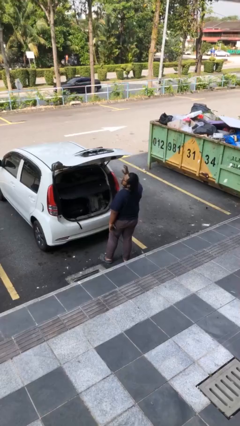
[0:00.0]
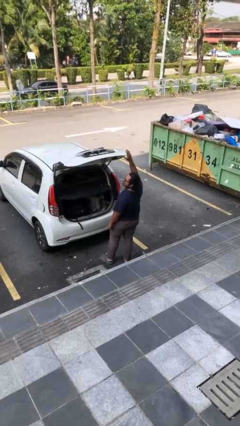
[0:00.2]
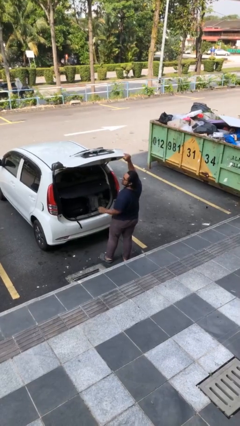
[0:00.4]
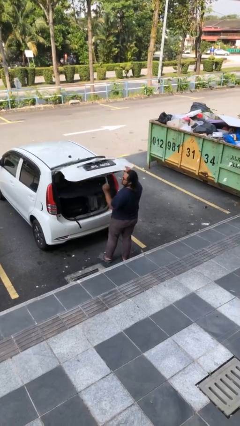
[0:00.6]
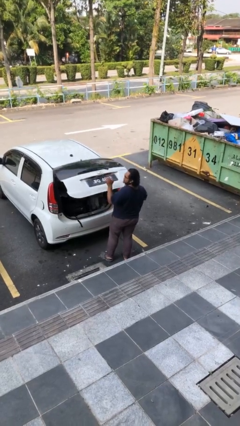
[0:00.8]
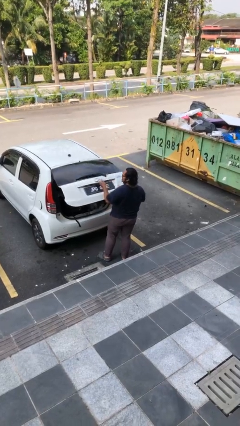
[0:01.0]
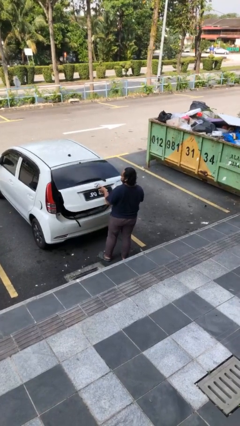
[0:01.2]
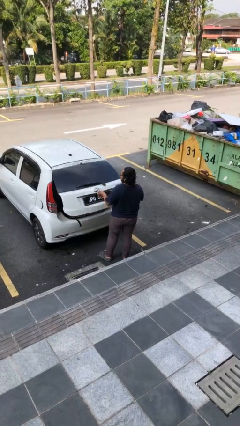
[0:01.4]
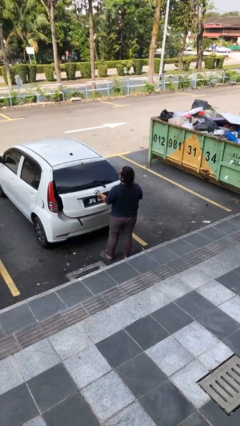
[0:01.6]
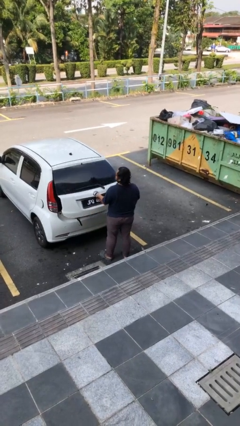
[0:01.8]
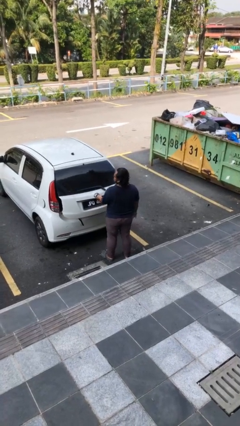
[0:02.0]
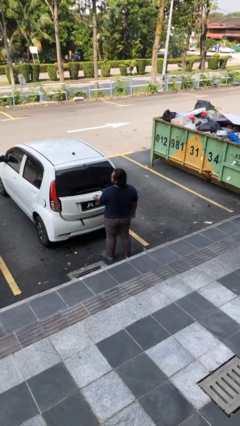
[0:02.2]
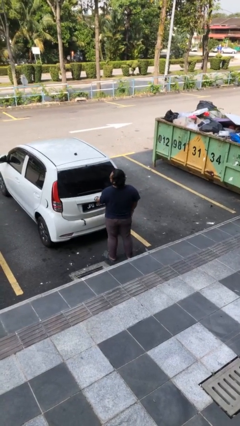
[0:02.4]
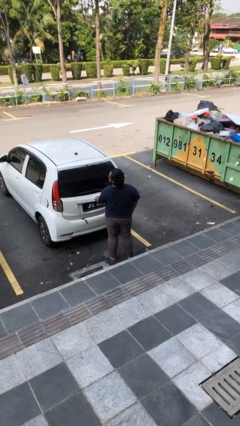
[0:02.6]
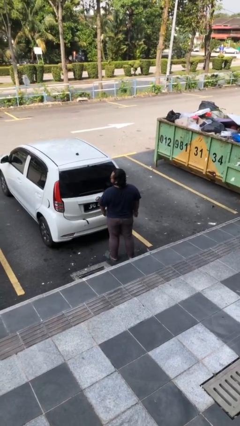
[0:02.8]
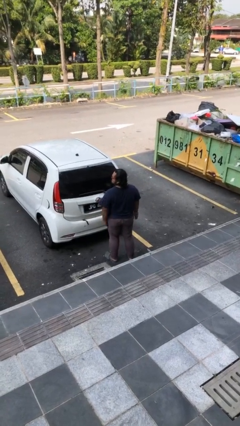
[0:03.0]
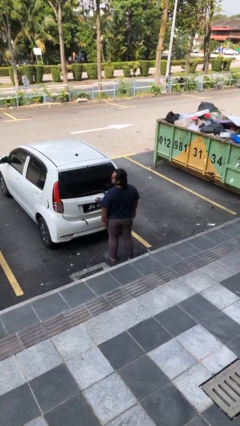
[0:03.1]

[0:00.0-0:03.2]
person closes car trunk

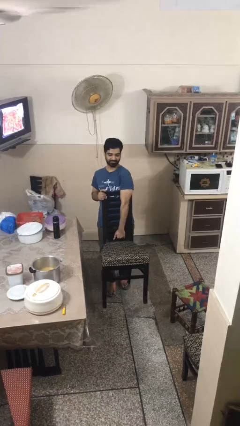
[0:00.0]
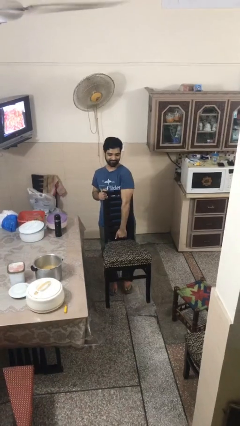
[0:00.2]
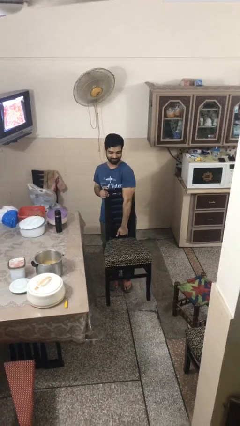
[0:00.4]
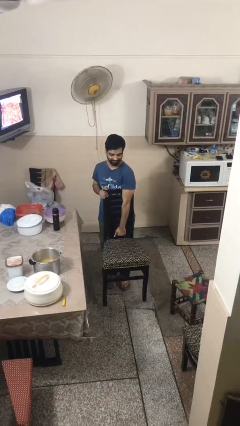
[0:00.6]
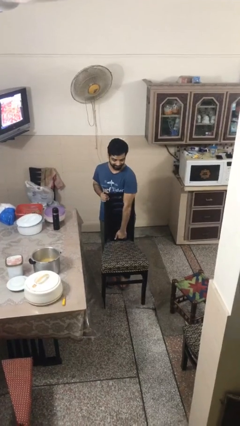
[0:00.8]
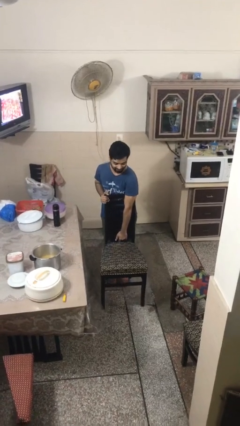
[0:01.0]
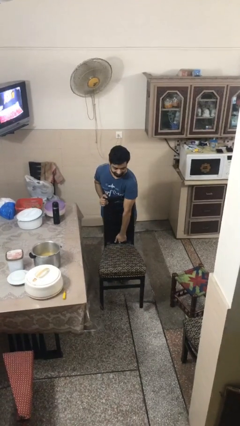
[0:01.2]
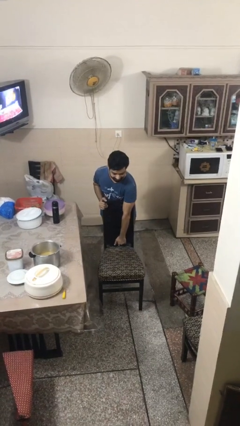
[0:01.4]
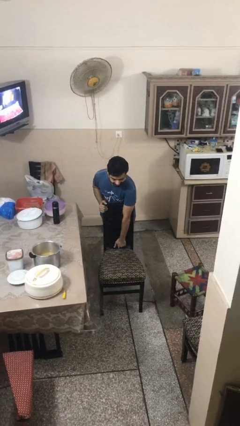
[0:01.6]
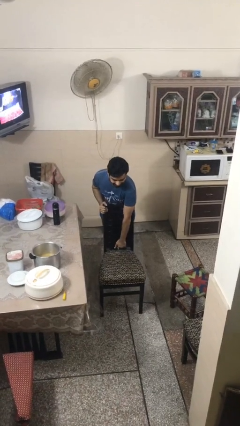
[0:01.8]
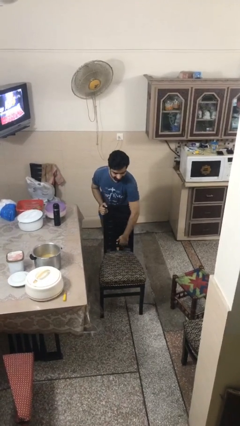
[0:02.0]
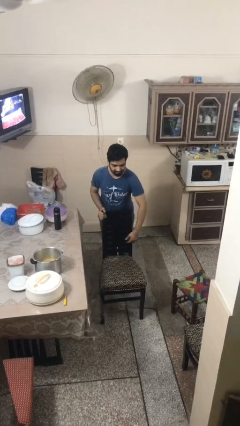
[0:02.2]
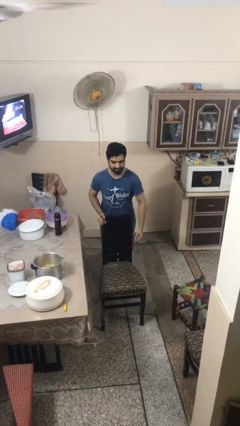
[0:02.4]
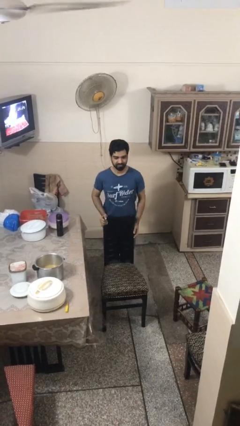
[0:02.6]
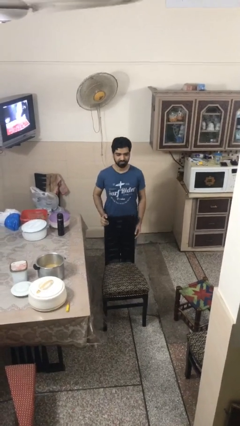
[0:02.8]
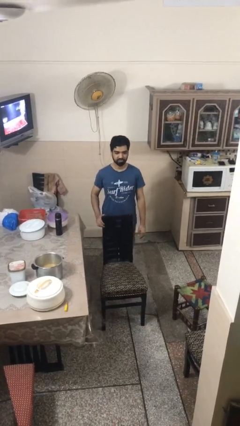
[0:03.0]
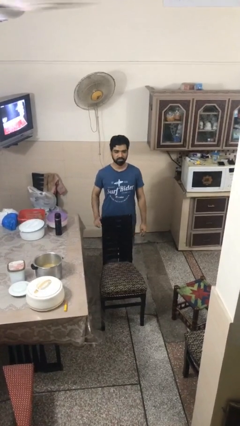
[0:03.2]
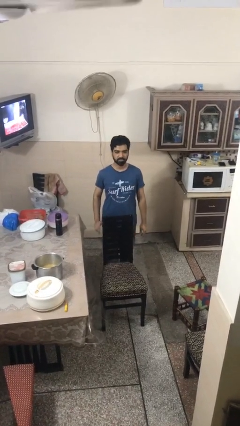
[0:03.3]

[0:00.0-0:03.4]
person puts down object on floor

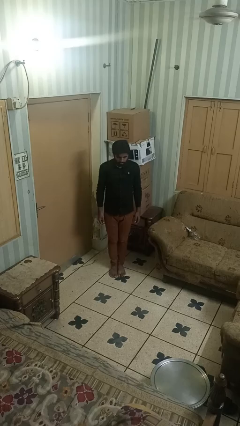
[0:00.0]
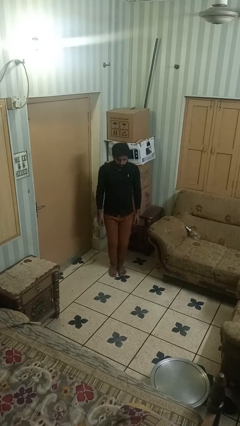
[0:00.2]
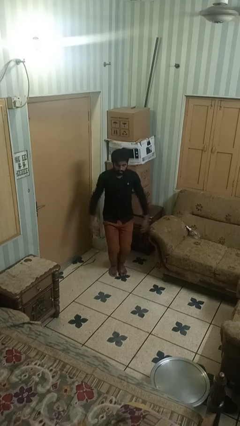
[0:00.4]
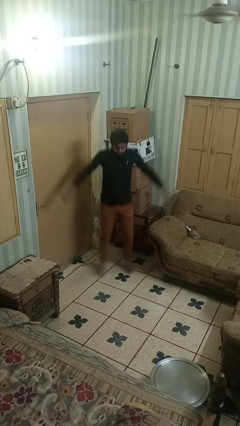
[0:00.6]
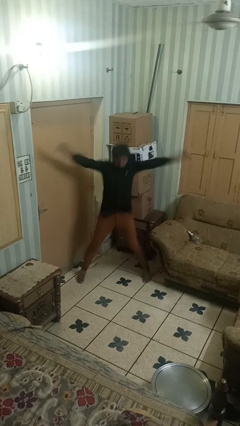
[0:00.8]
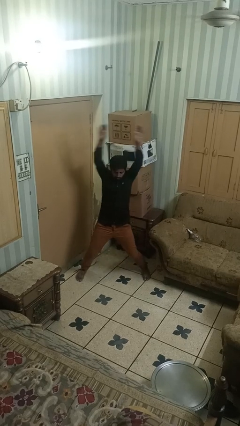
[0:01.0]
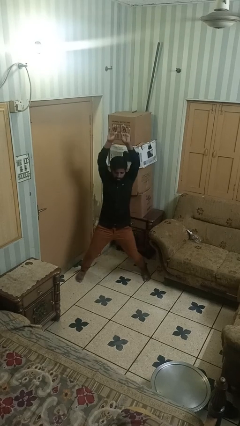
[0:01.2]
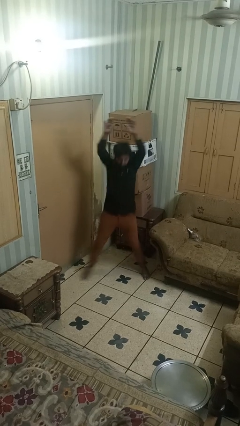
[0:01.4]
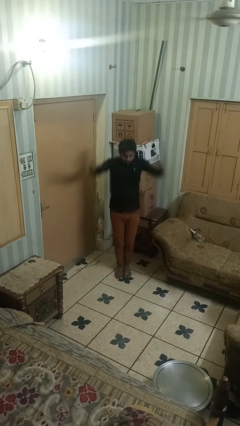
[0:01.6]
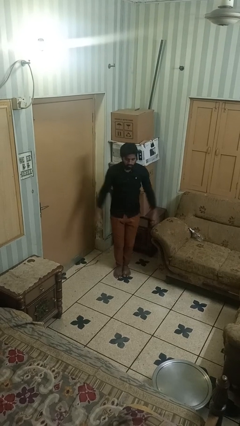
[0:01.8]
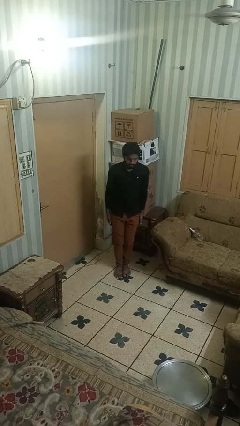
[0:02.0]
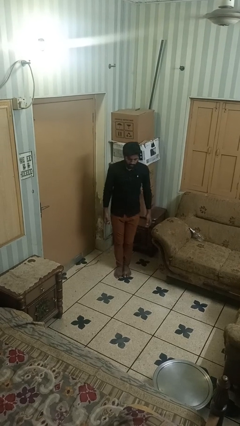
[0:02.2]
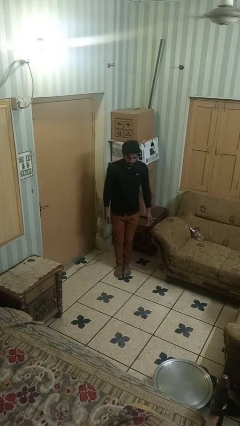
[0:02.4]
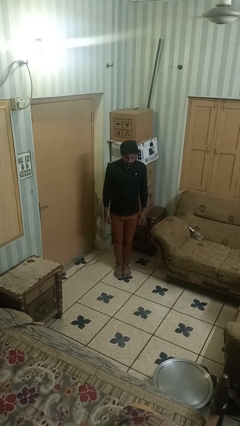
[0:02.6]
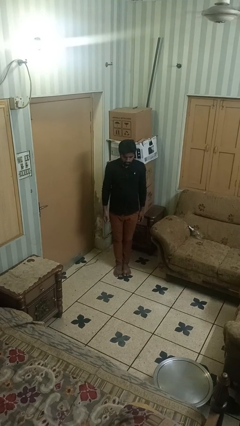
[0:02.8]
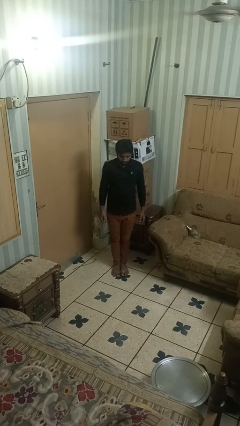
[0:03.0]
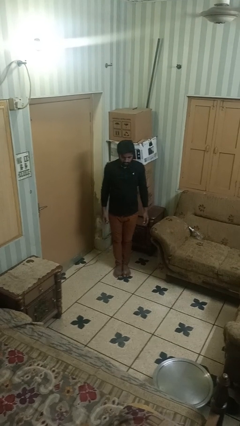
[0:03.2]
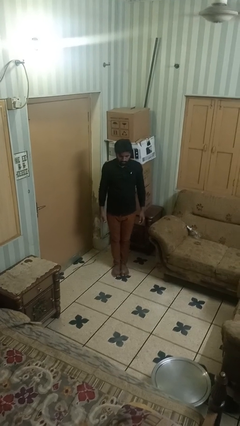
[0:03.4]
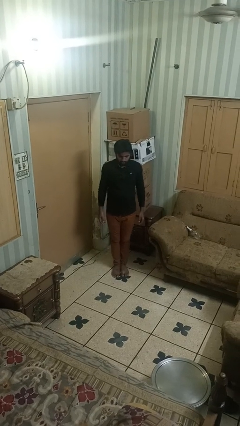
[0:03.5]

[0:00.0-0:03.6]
person exercises with jumping jacks

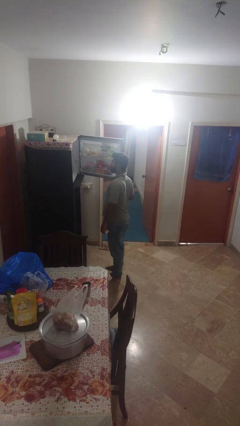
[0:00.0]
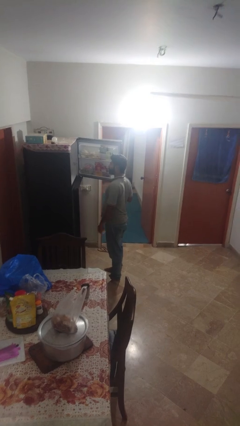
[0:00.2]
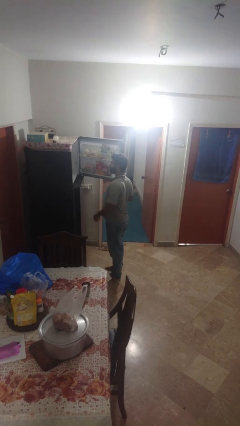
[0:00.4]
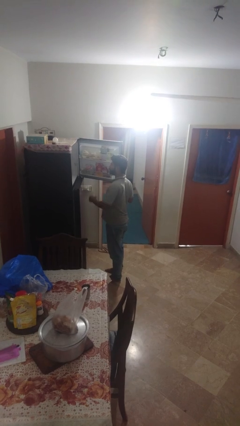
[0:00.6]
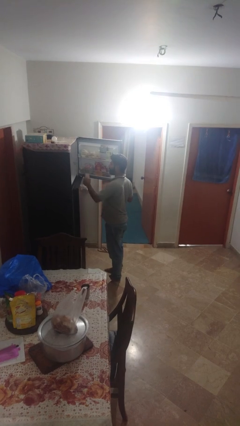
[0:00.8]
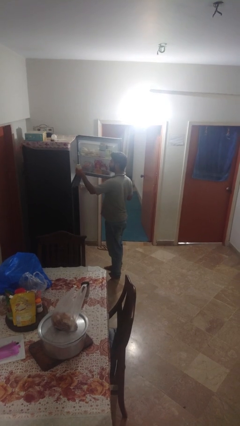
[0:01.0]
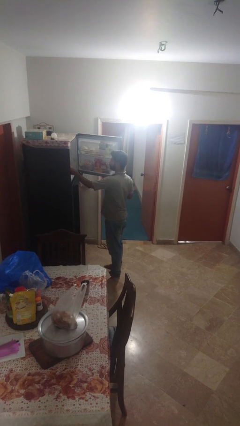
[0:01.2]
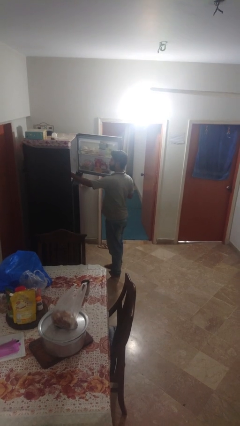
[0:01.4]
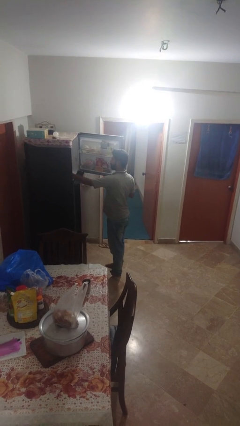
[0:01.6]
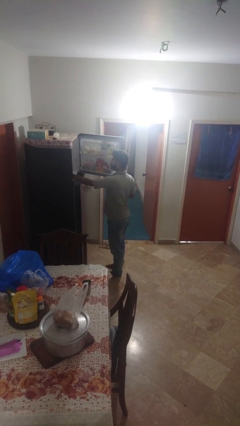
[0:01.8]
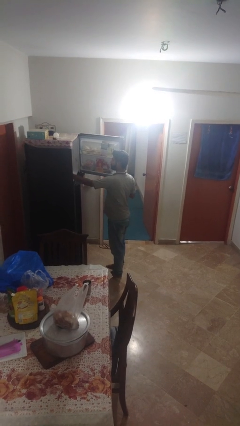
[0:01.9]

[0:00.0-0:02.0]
person puts object into refrigerator

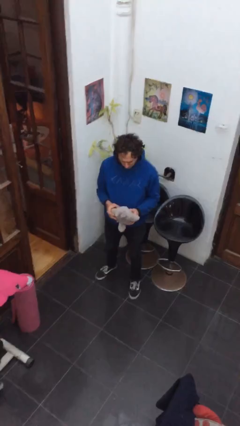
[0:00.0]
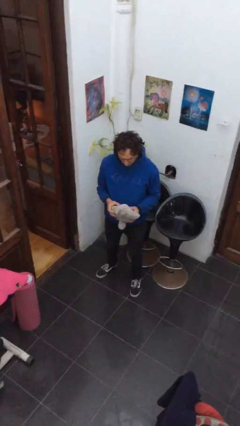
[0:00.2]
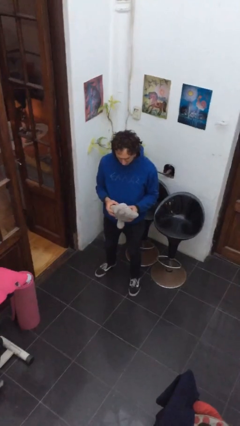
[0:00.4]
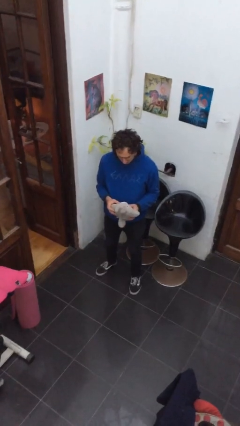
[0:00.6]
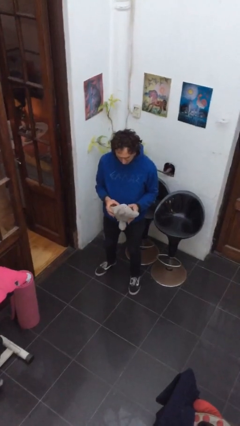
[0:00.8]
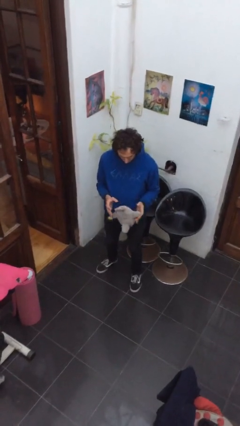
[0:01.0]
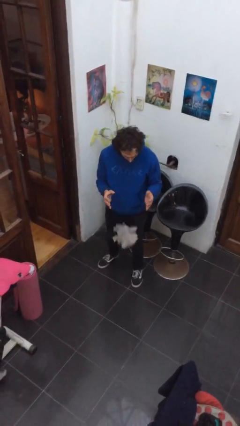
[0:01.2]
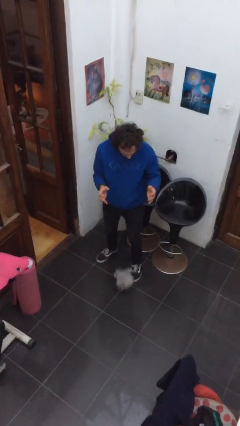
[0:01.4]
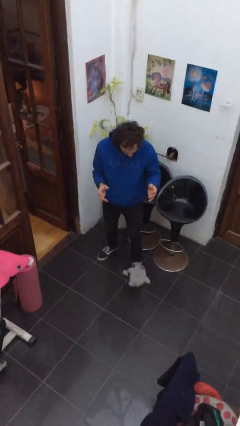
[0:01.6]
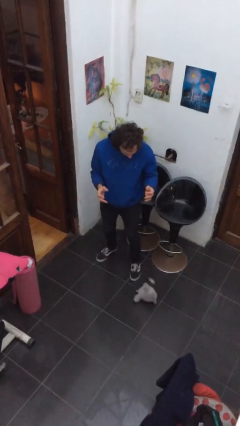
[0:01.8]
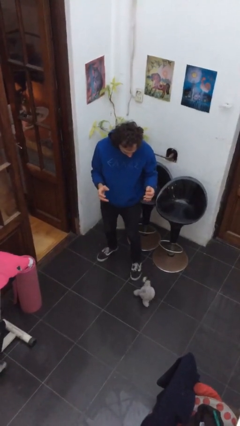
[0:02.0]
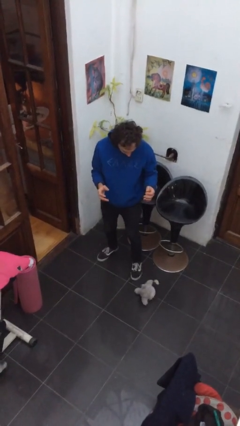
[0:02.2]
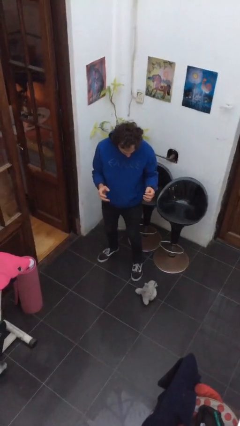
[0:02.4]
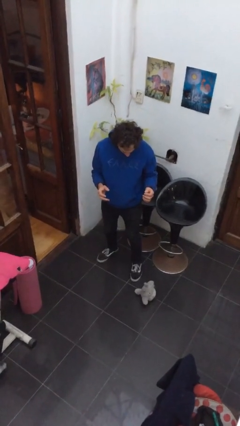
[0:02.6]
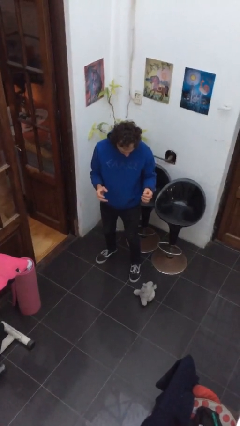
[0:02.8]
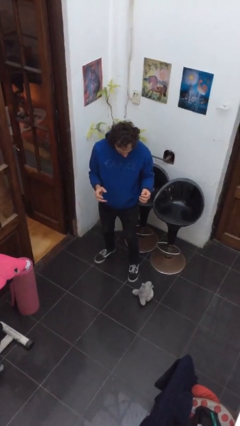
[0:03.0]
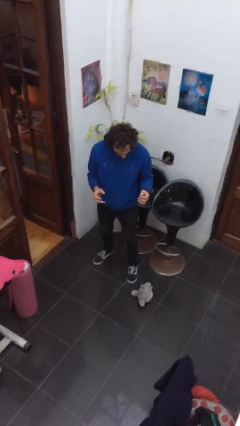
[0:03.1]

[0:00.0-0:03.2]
person drops object

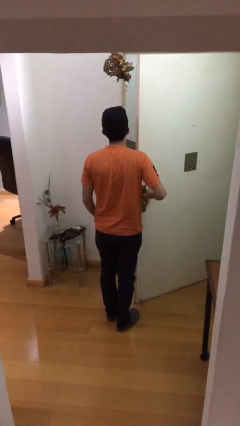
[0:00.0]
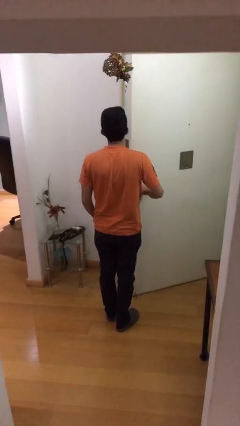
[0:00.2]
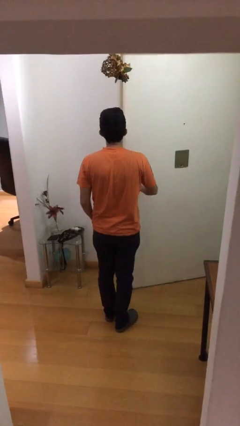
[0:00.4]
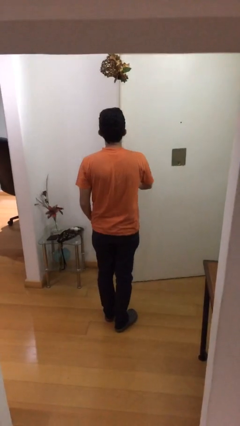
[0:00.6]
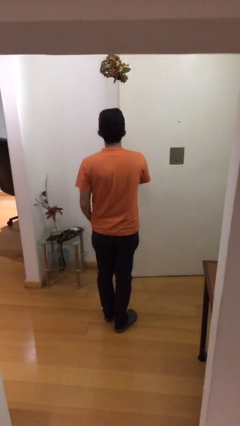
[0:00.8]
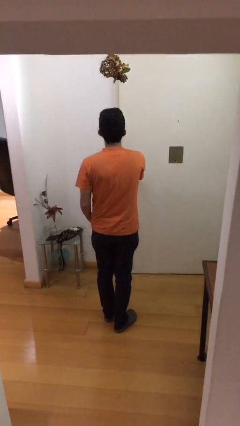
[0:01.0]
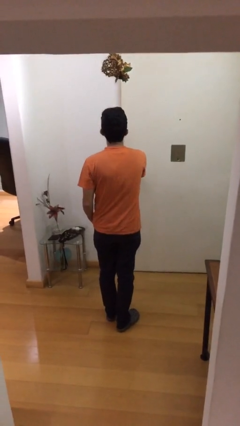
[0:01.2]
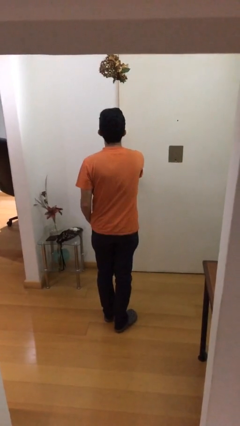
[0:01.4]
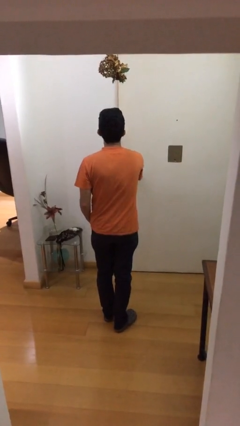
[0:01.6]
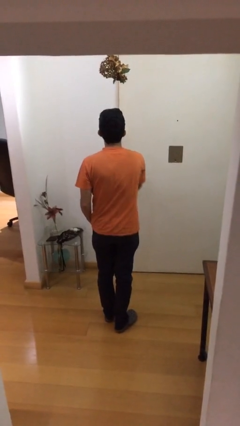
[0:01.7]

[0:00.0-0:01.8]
person closes facility door

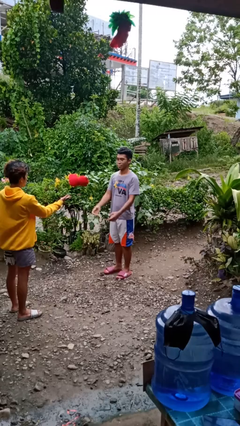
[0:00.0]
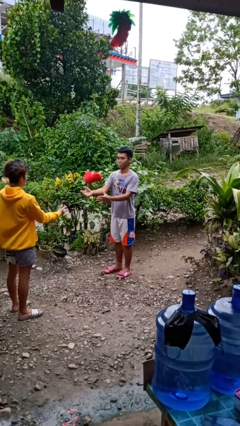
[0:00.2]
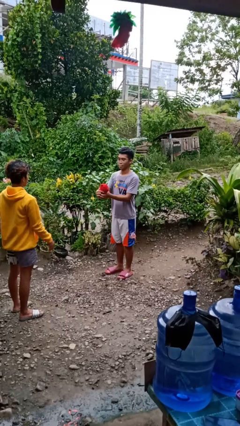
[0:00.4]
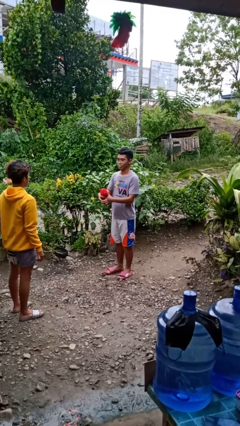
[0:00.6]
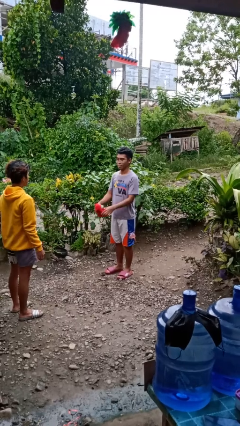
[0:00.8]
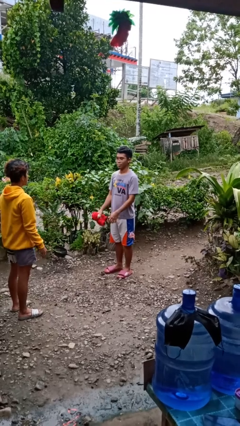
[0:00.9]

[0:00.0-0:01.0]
person catches object from person
